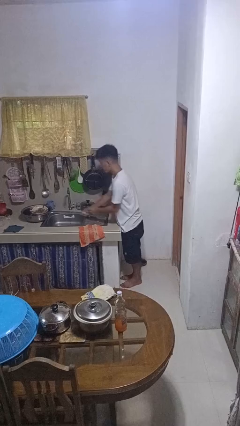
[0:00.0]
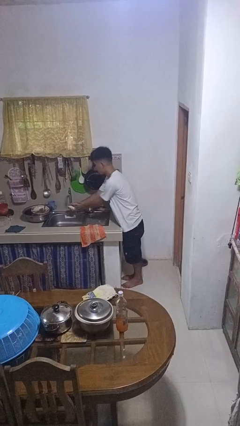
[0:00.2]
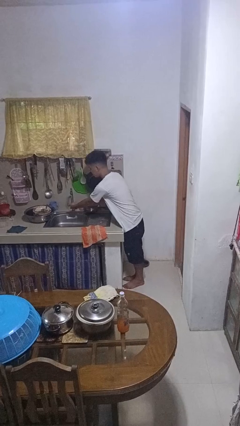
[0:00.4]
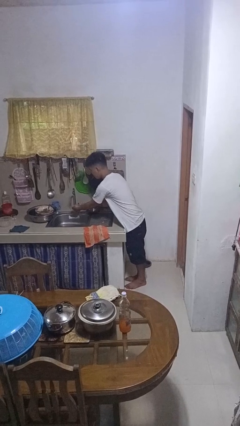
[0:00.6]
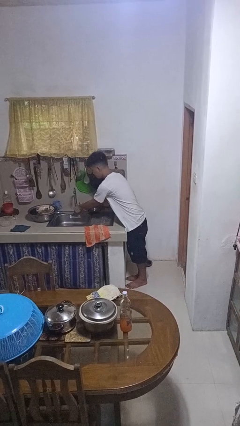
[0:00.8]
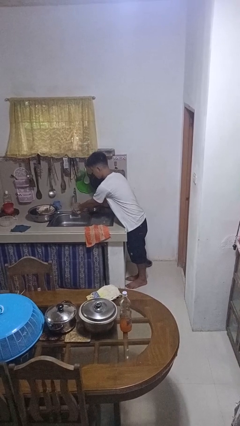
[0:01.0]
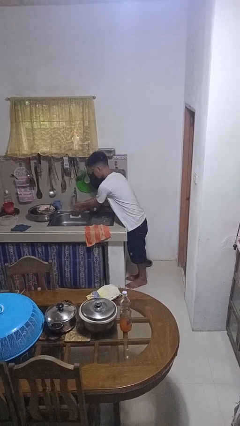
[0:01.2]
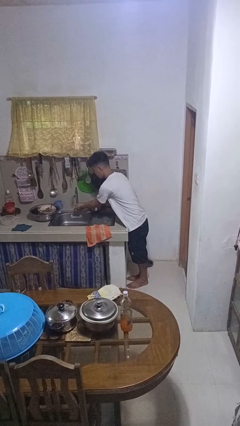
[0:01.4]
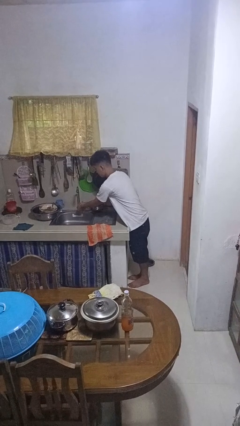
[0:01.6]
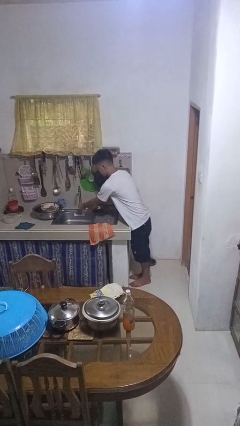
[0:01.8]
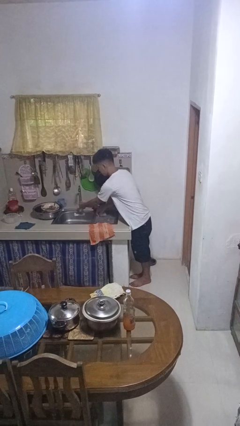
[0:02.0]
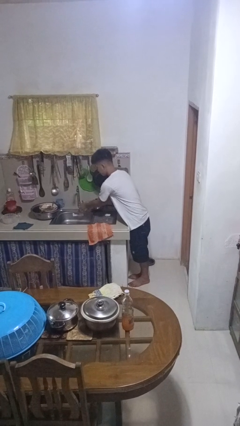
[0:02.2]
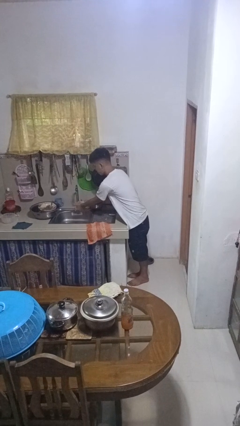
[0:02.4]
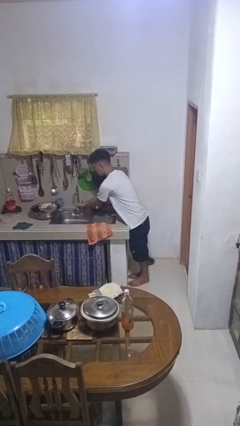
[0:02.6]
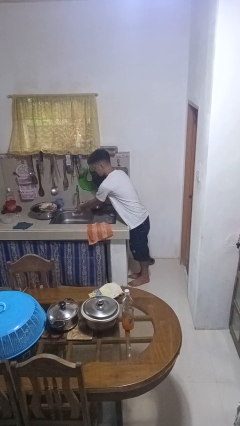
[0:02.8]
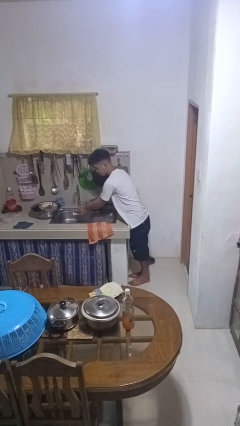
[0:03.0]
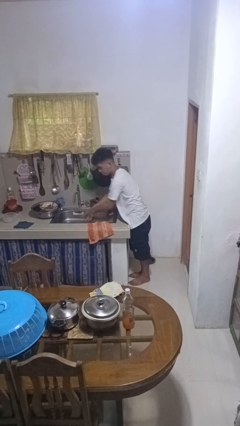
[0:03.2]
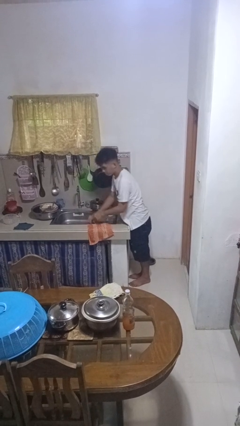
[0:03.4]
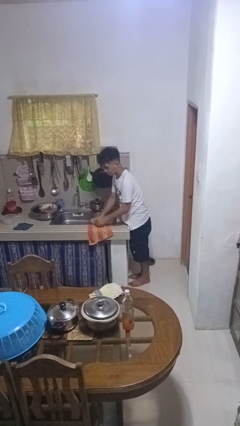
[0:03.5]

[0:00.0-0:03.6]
person washes hands

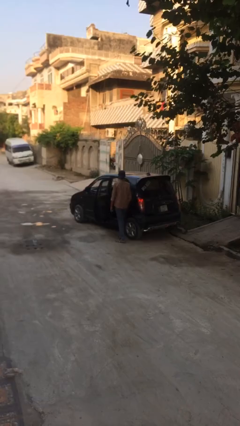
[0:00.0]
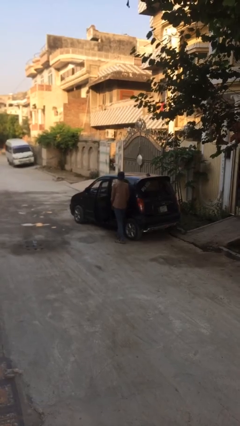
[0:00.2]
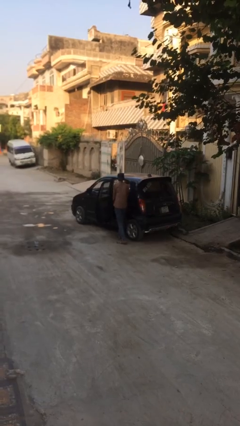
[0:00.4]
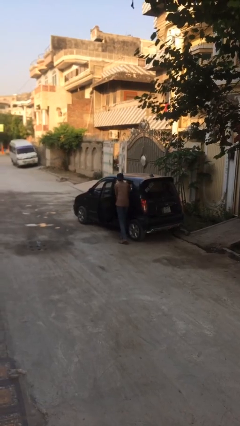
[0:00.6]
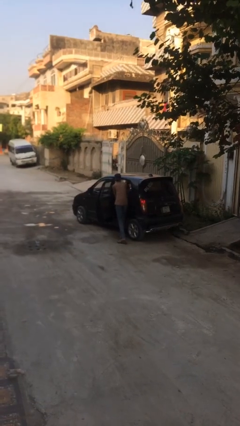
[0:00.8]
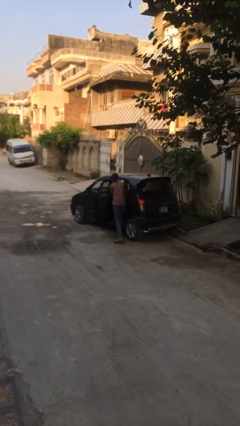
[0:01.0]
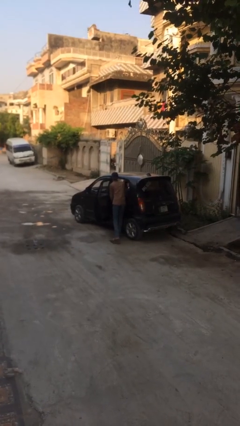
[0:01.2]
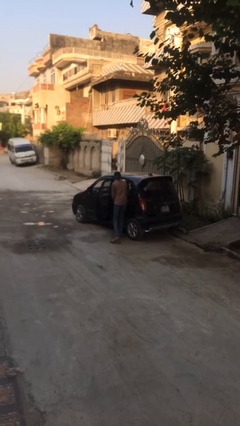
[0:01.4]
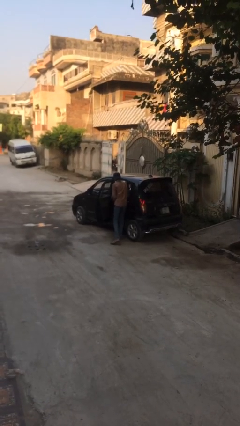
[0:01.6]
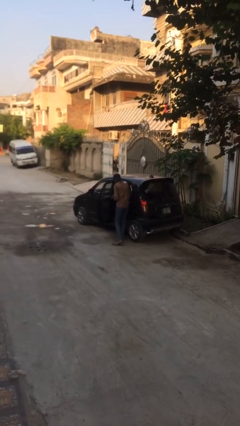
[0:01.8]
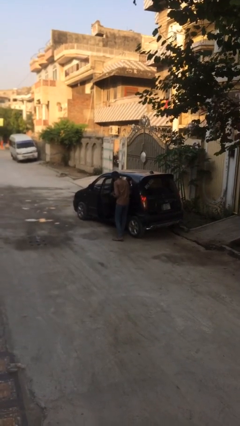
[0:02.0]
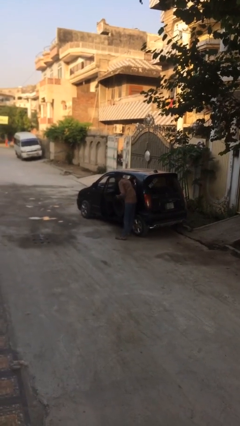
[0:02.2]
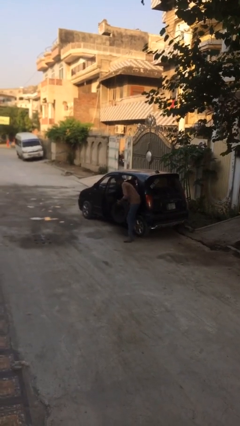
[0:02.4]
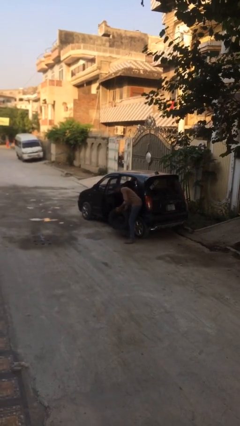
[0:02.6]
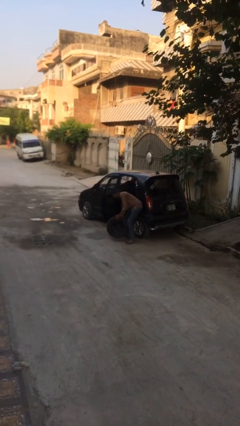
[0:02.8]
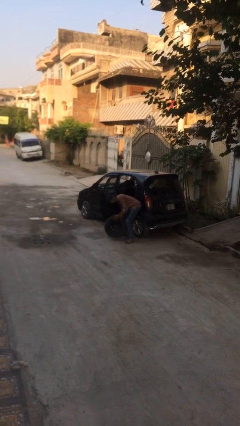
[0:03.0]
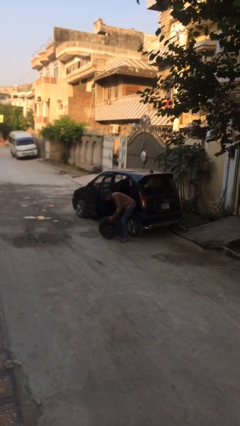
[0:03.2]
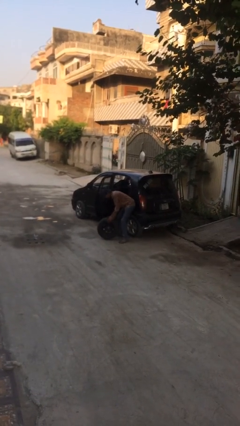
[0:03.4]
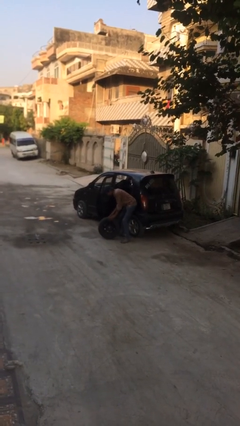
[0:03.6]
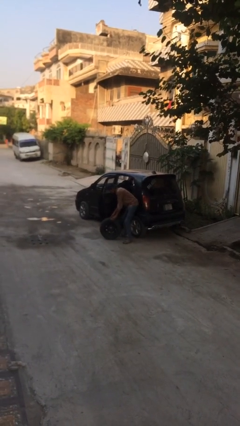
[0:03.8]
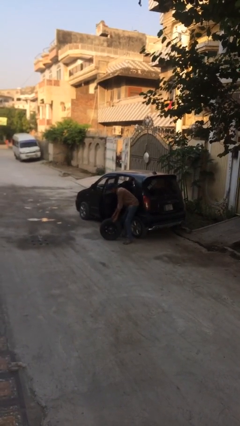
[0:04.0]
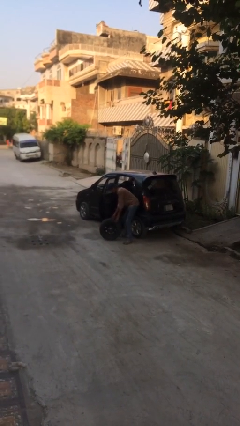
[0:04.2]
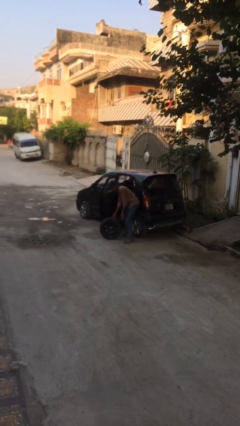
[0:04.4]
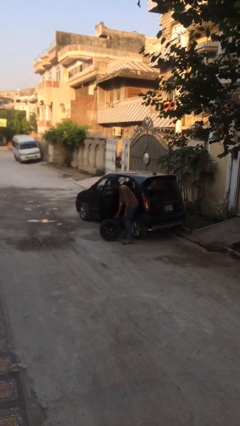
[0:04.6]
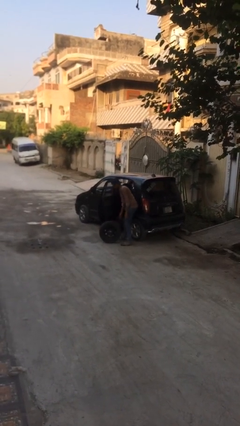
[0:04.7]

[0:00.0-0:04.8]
person unloads car

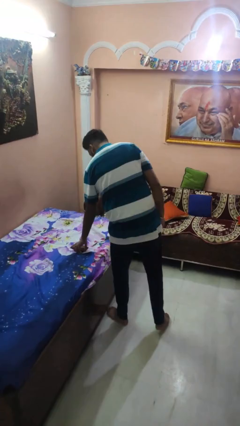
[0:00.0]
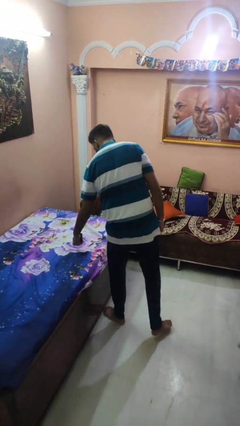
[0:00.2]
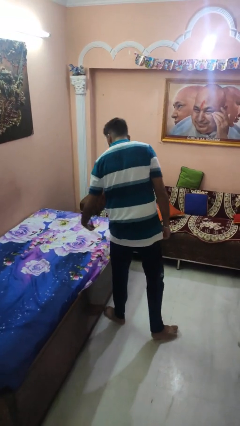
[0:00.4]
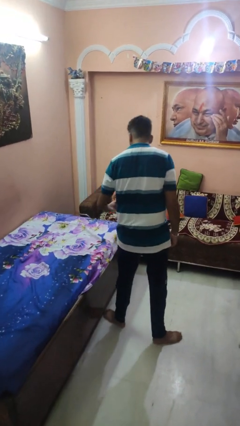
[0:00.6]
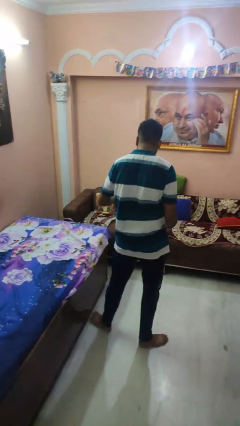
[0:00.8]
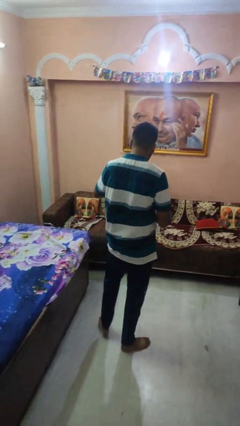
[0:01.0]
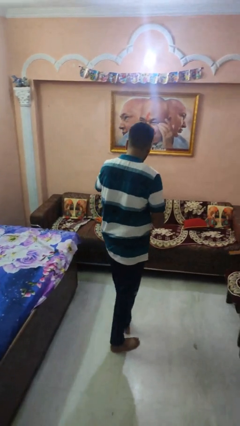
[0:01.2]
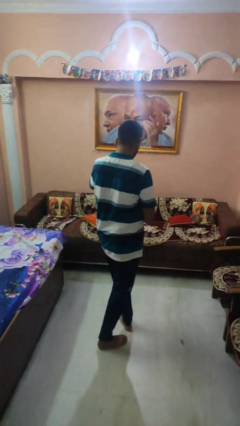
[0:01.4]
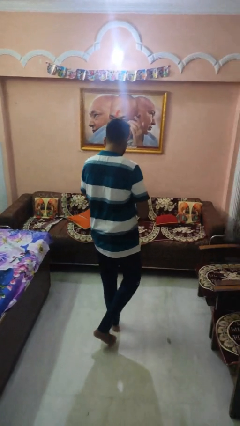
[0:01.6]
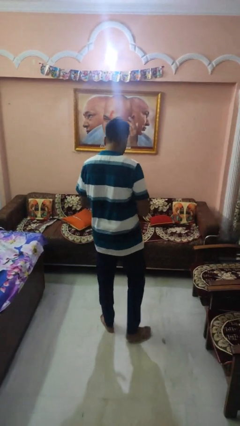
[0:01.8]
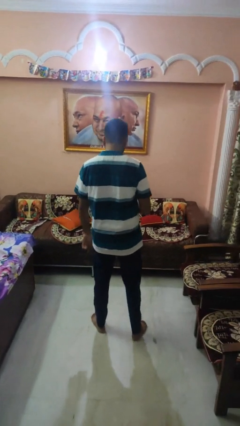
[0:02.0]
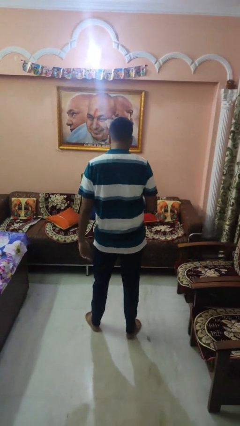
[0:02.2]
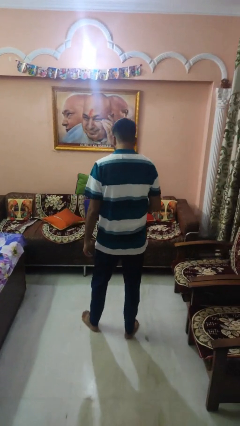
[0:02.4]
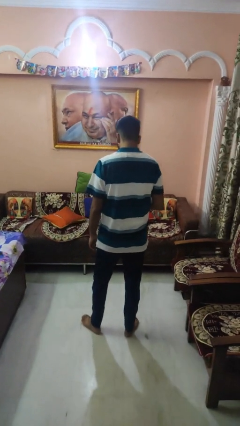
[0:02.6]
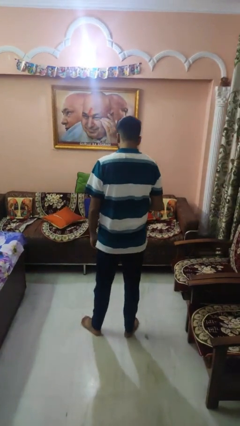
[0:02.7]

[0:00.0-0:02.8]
person picks up object from bed

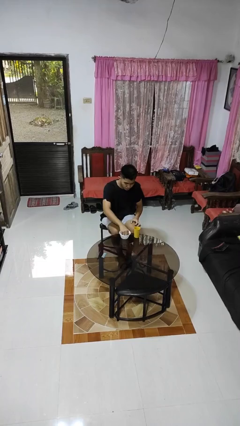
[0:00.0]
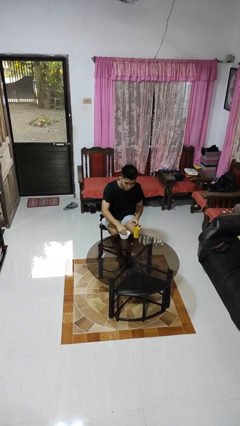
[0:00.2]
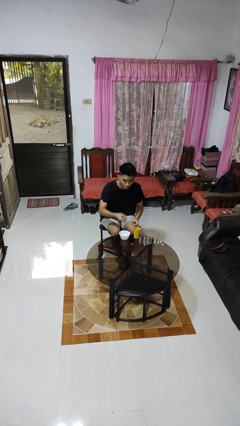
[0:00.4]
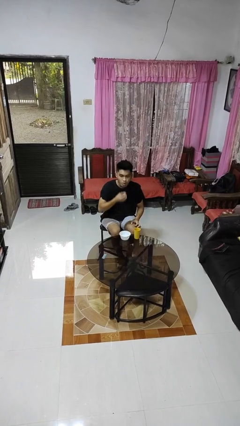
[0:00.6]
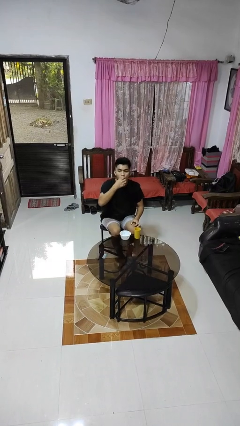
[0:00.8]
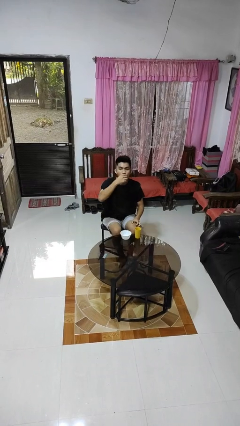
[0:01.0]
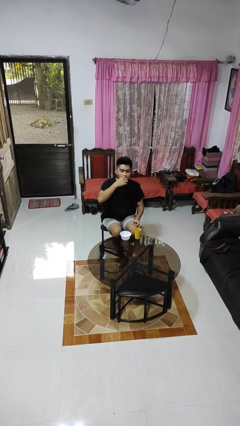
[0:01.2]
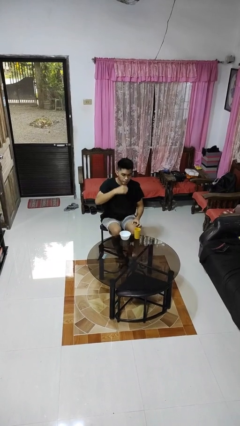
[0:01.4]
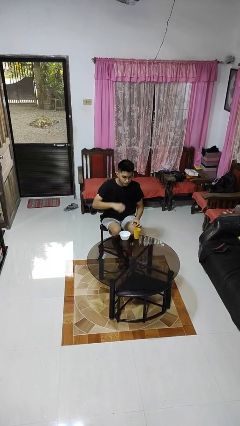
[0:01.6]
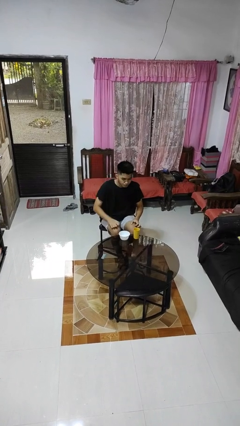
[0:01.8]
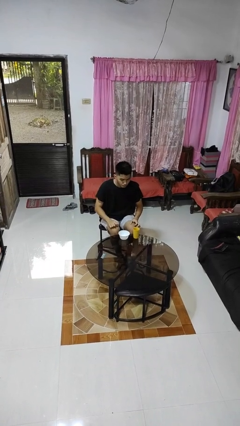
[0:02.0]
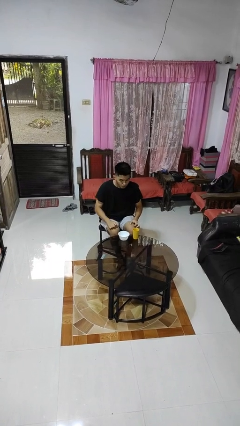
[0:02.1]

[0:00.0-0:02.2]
person takes medicine pills

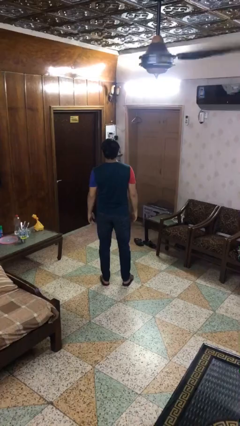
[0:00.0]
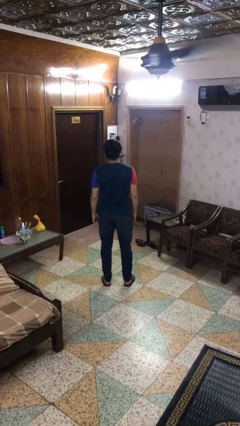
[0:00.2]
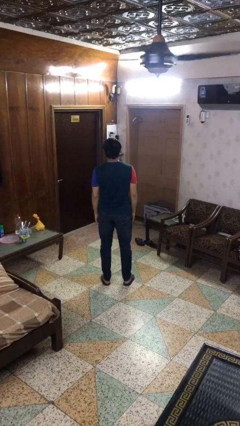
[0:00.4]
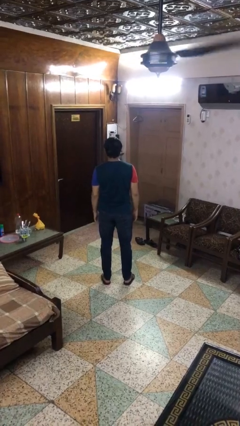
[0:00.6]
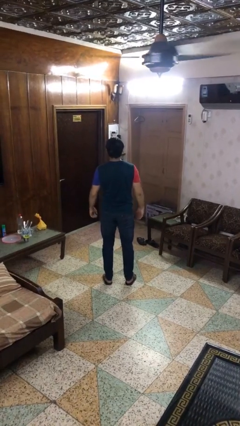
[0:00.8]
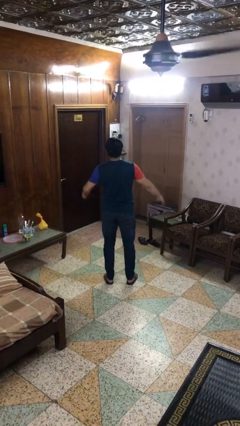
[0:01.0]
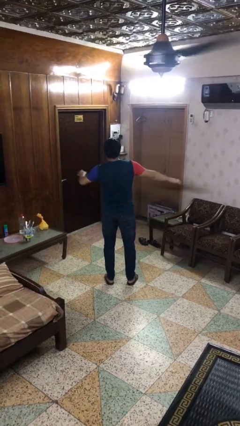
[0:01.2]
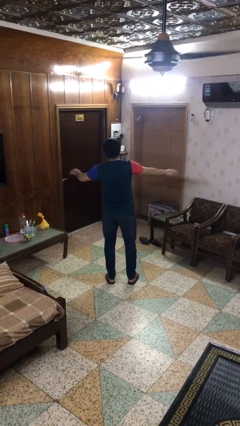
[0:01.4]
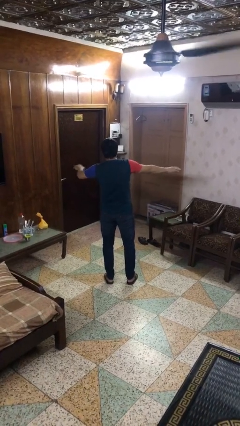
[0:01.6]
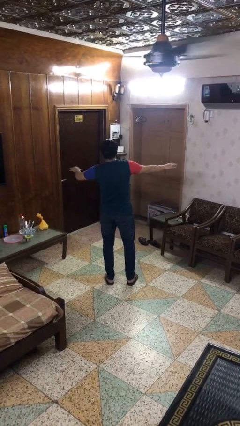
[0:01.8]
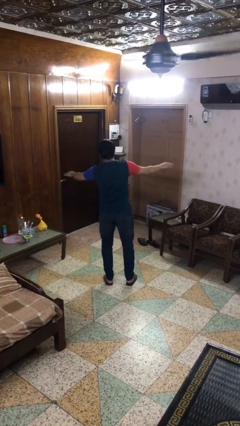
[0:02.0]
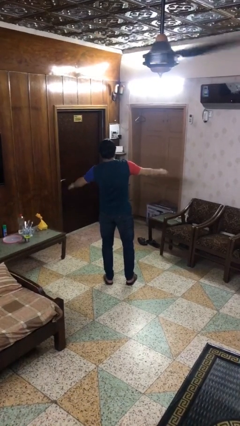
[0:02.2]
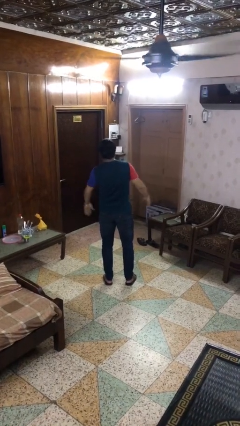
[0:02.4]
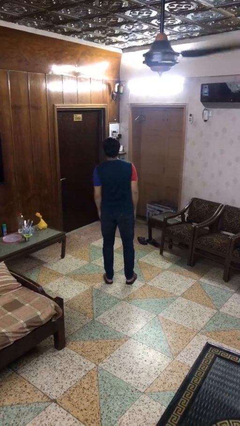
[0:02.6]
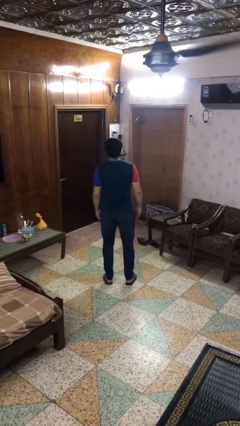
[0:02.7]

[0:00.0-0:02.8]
person dances in place

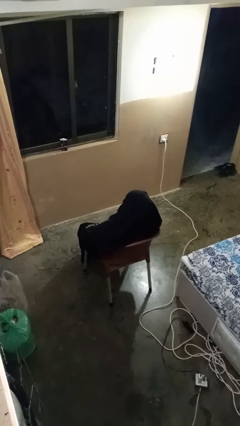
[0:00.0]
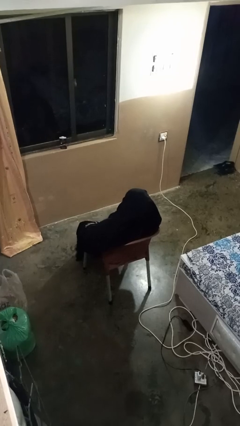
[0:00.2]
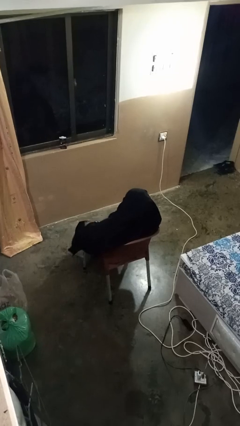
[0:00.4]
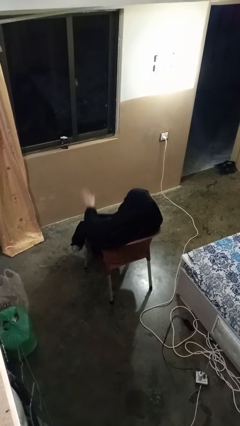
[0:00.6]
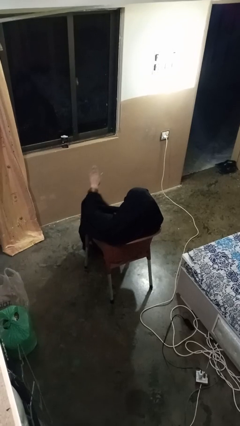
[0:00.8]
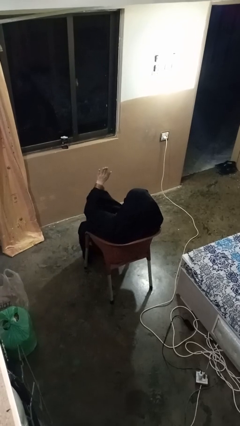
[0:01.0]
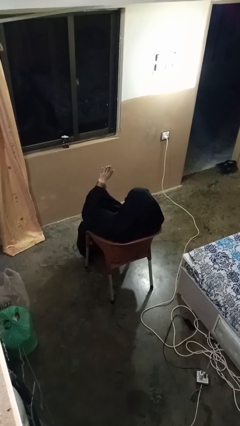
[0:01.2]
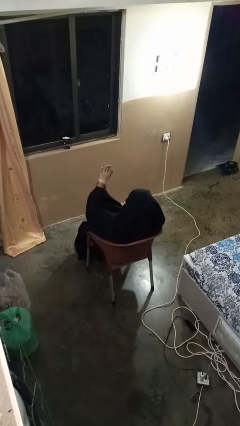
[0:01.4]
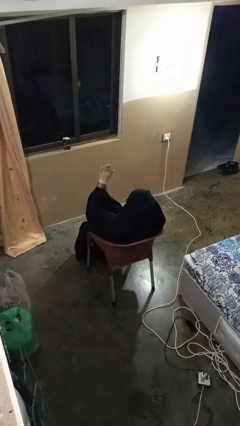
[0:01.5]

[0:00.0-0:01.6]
person gestures raise hand
